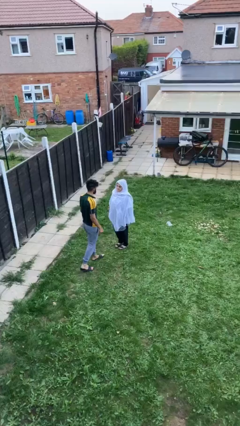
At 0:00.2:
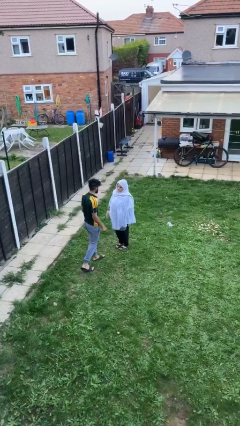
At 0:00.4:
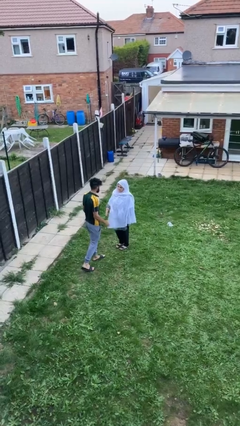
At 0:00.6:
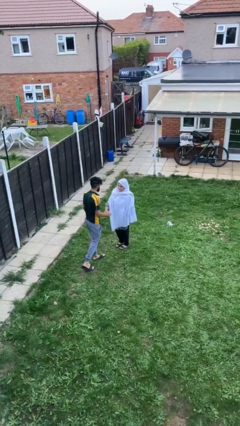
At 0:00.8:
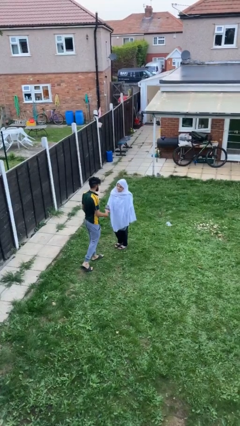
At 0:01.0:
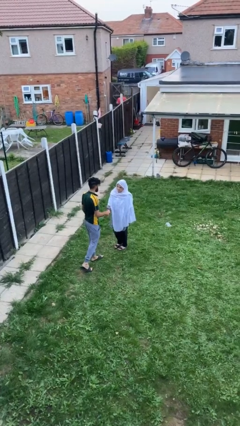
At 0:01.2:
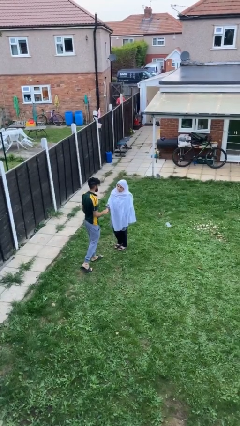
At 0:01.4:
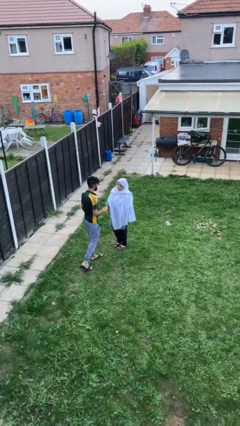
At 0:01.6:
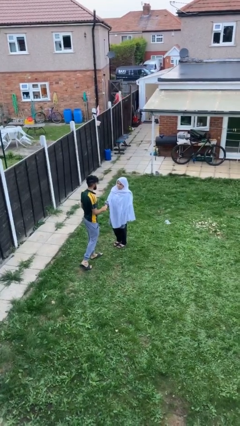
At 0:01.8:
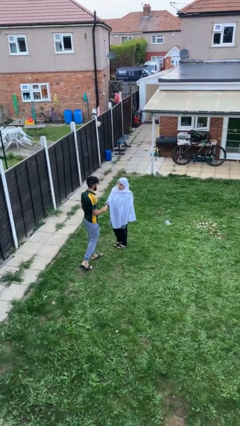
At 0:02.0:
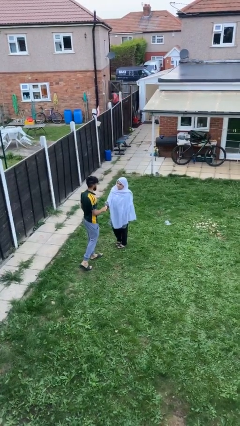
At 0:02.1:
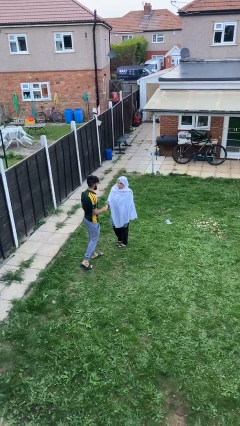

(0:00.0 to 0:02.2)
person shakes hand

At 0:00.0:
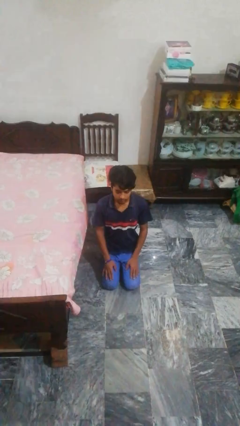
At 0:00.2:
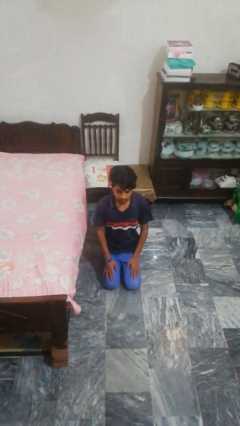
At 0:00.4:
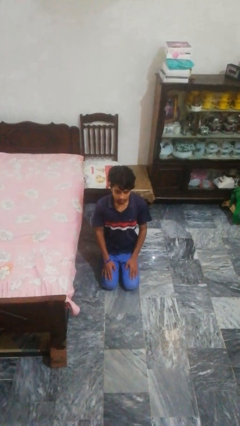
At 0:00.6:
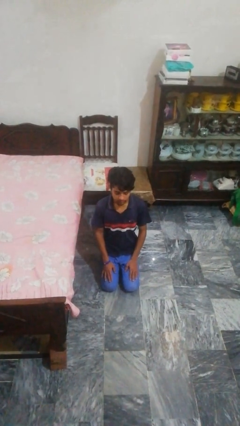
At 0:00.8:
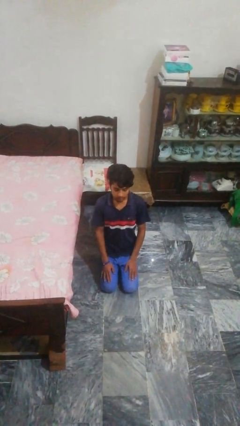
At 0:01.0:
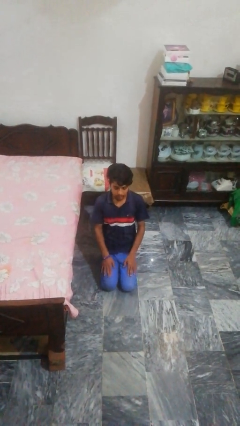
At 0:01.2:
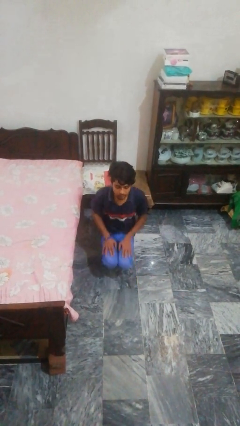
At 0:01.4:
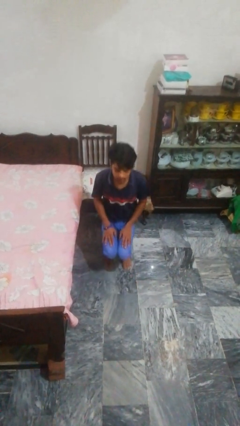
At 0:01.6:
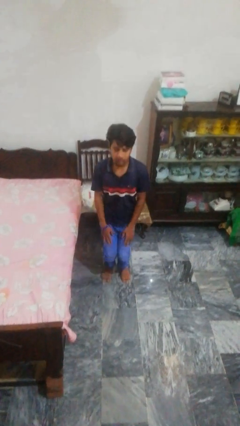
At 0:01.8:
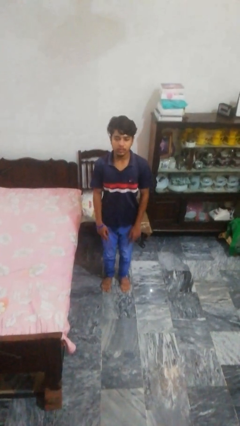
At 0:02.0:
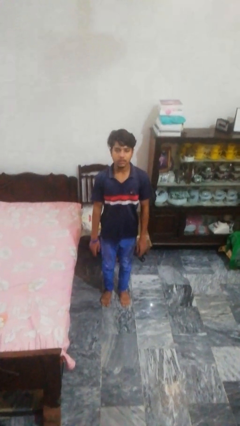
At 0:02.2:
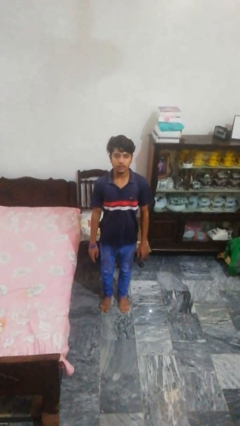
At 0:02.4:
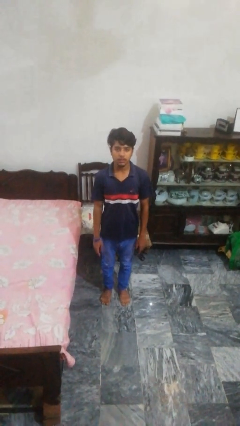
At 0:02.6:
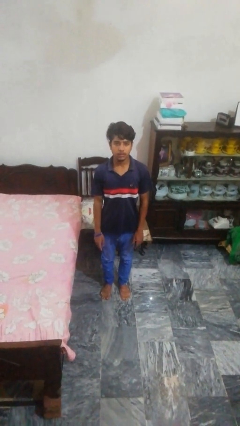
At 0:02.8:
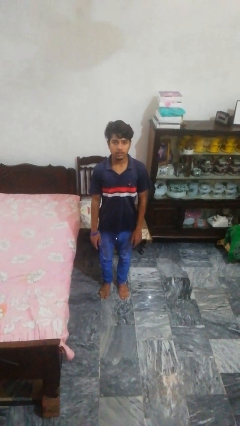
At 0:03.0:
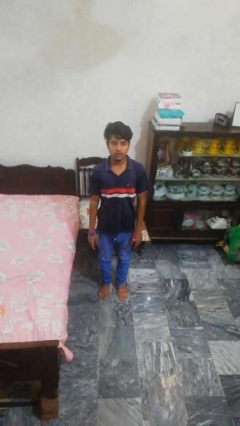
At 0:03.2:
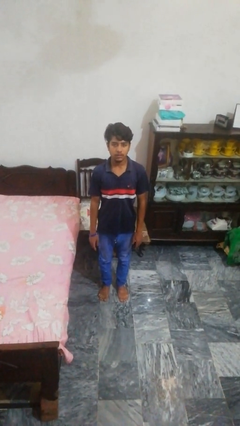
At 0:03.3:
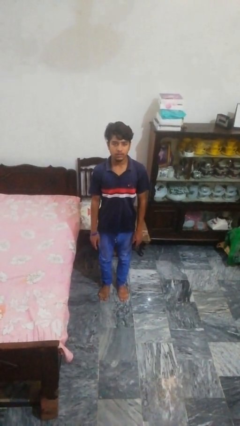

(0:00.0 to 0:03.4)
person stands up from floor

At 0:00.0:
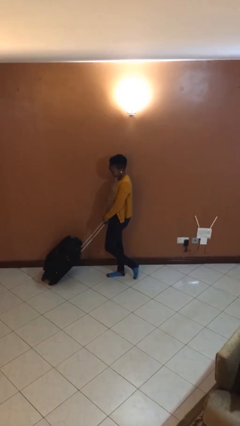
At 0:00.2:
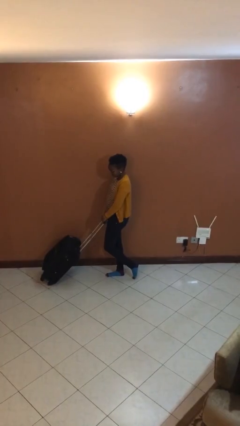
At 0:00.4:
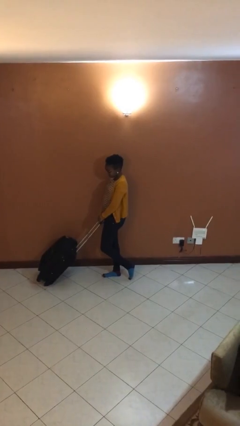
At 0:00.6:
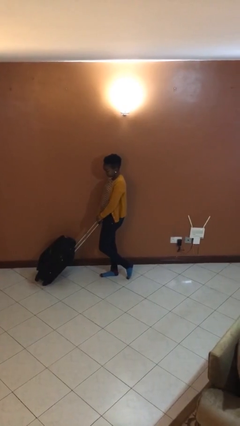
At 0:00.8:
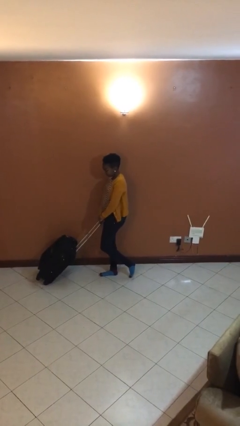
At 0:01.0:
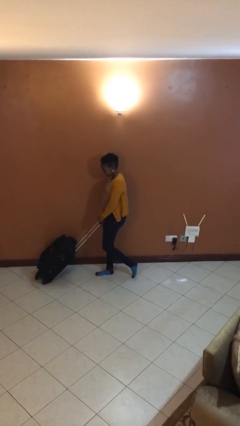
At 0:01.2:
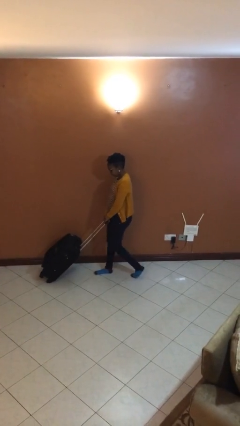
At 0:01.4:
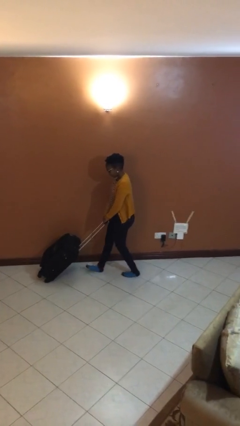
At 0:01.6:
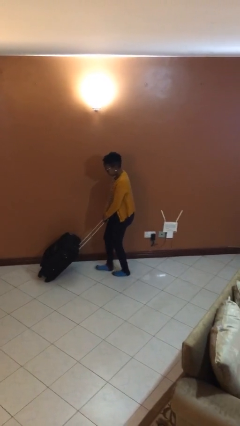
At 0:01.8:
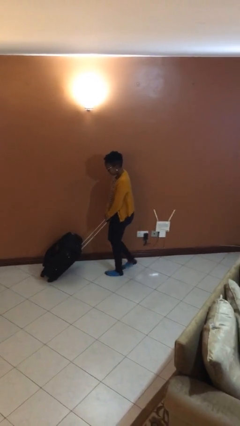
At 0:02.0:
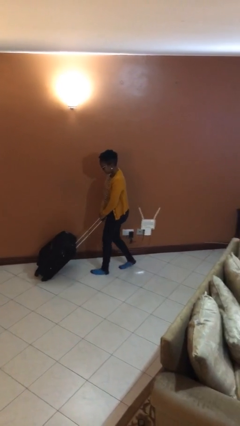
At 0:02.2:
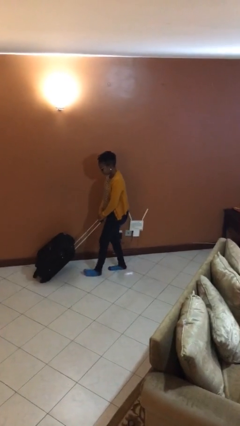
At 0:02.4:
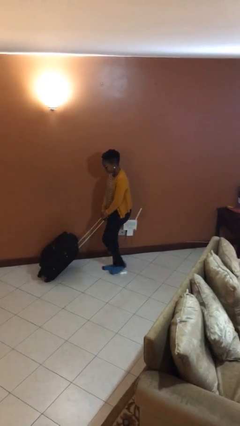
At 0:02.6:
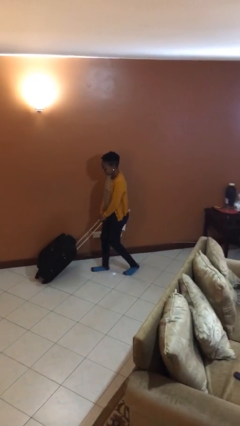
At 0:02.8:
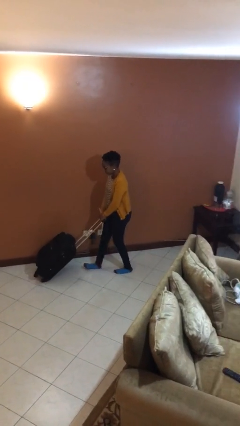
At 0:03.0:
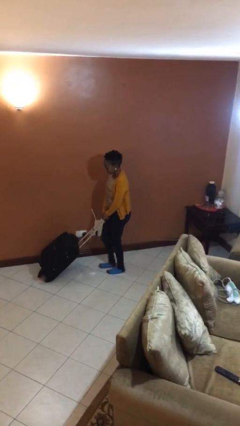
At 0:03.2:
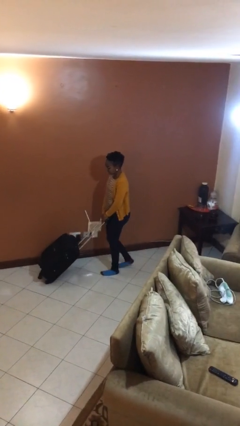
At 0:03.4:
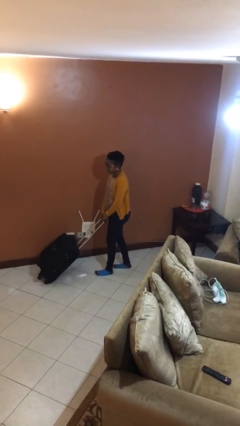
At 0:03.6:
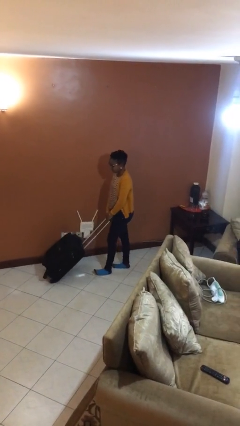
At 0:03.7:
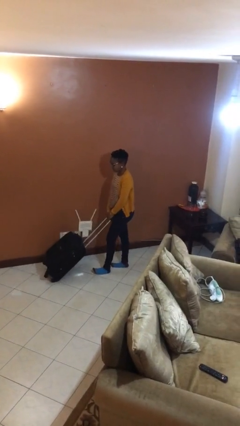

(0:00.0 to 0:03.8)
person pulls wheeled cart

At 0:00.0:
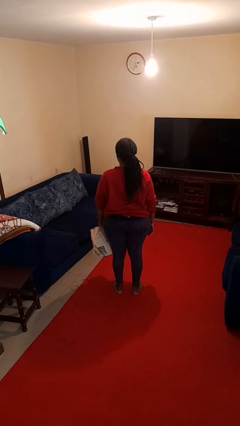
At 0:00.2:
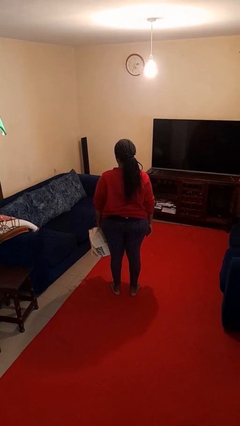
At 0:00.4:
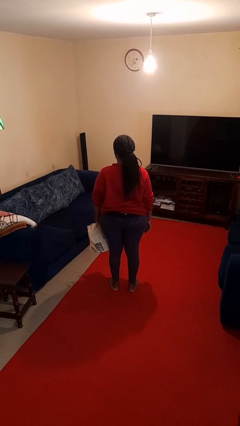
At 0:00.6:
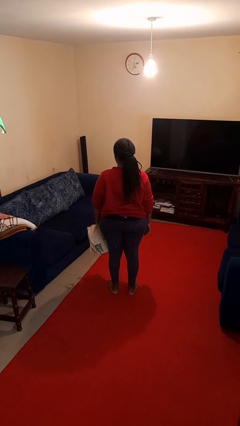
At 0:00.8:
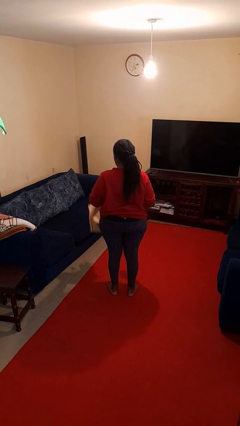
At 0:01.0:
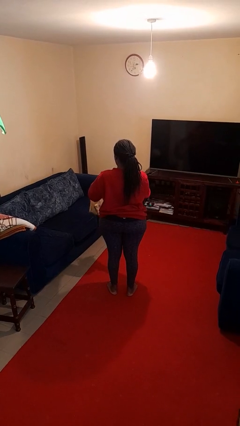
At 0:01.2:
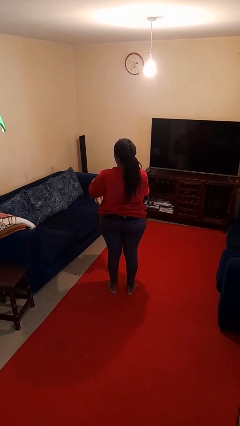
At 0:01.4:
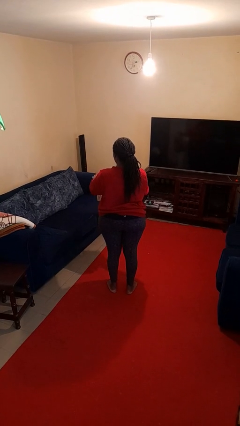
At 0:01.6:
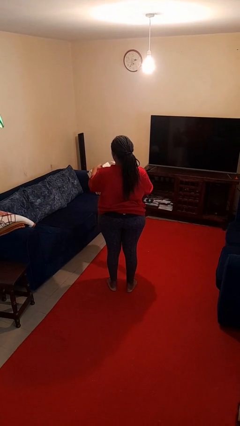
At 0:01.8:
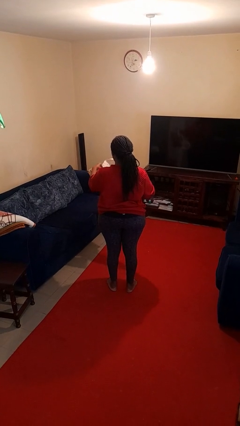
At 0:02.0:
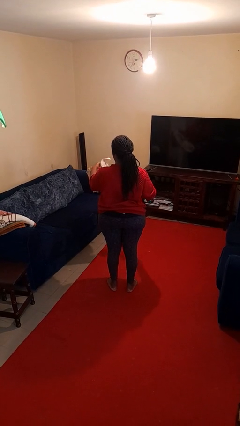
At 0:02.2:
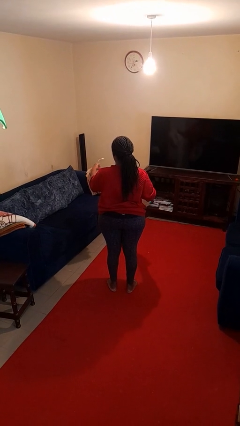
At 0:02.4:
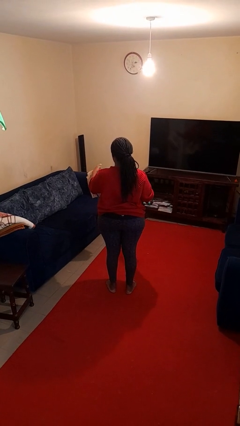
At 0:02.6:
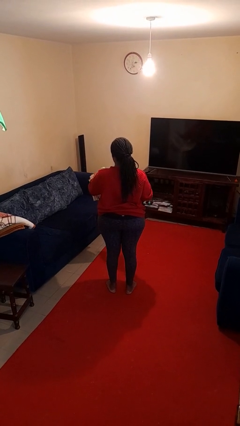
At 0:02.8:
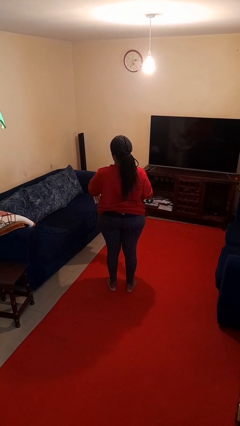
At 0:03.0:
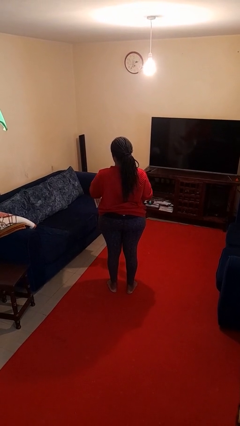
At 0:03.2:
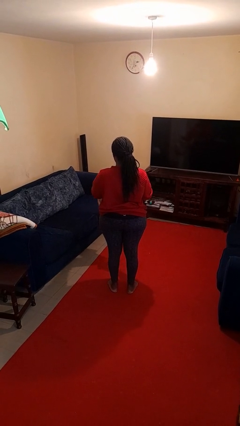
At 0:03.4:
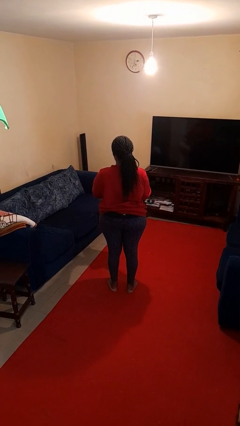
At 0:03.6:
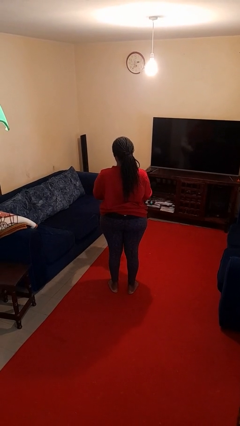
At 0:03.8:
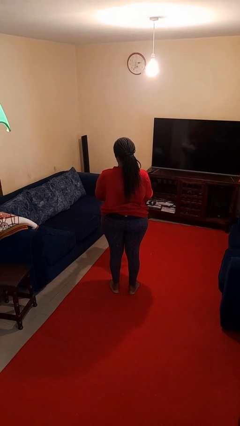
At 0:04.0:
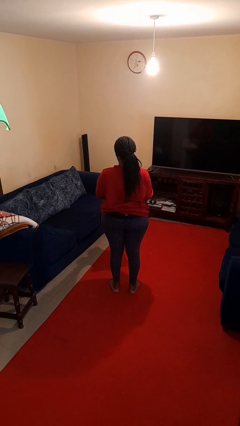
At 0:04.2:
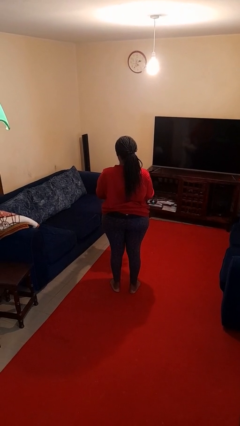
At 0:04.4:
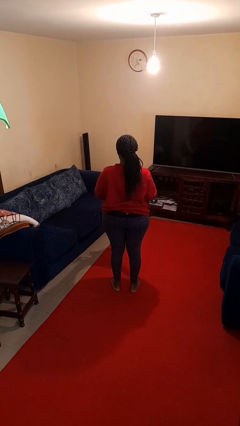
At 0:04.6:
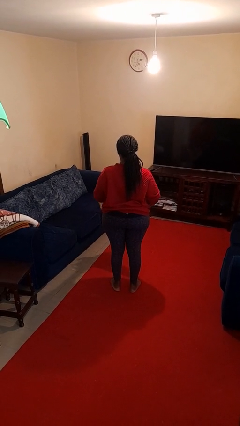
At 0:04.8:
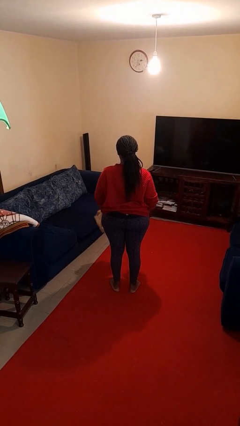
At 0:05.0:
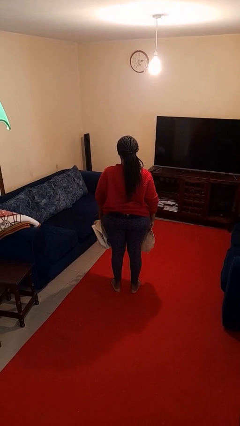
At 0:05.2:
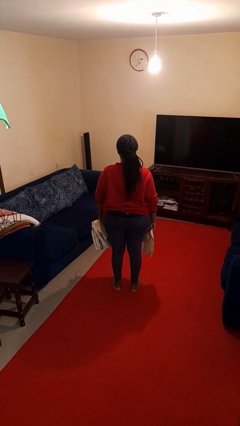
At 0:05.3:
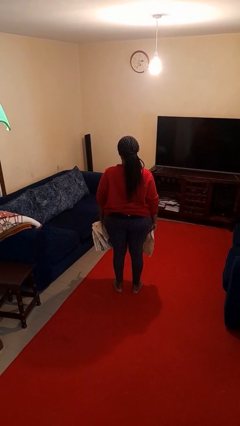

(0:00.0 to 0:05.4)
person tears paper

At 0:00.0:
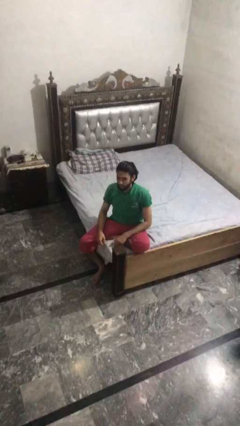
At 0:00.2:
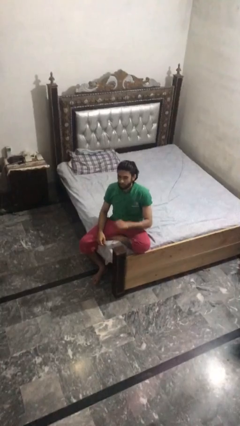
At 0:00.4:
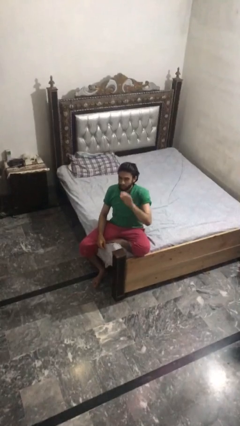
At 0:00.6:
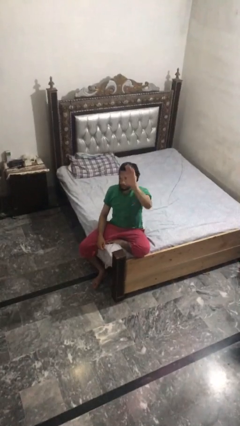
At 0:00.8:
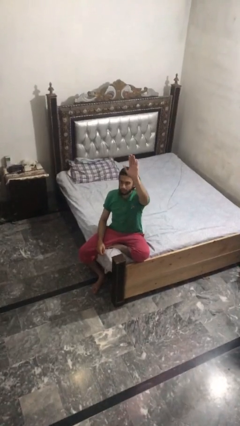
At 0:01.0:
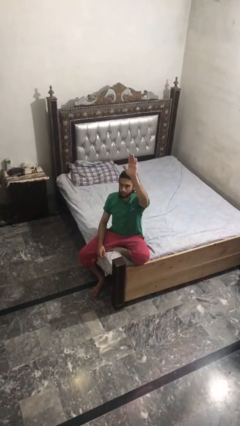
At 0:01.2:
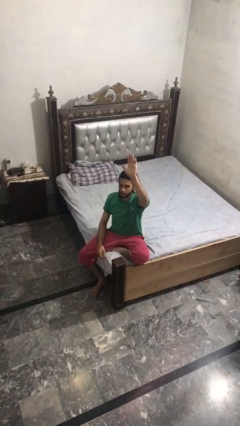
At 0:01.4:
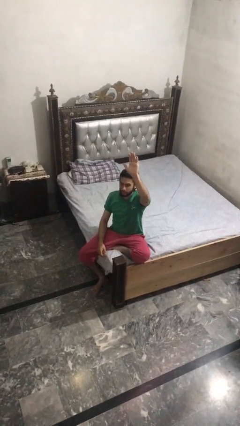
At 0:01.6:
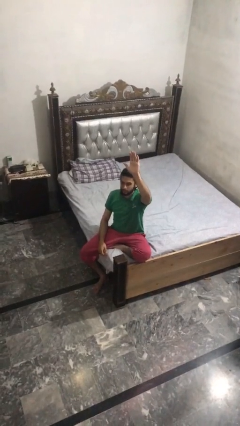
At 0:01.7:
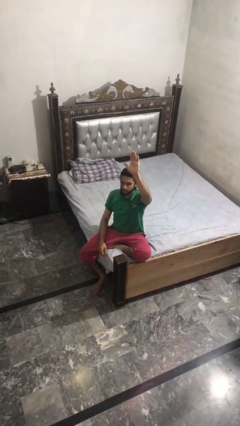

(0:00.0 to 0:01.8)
person gestures raise hand

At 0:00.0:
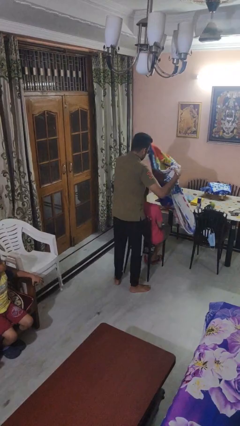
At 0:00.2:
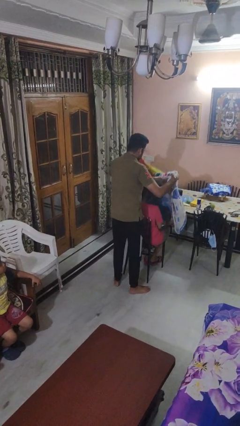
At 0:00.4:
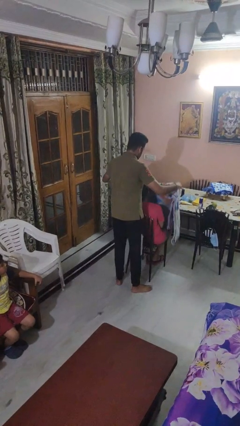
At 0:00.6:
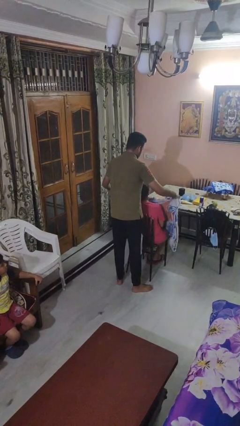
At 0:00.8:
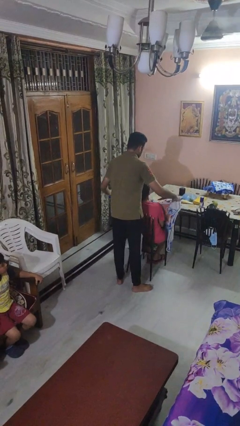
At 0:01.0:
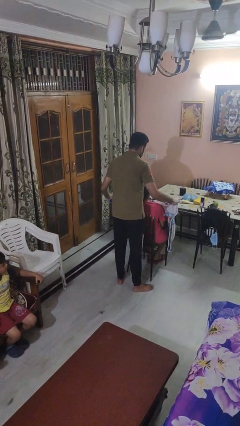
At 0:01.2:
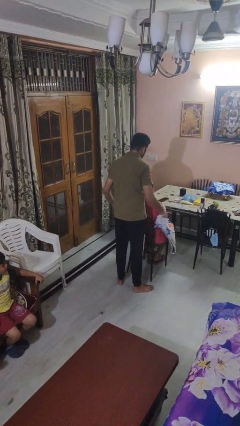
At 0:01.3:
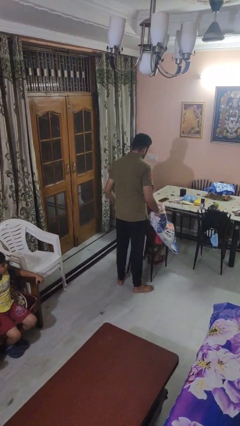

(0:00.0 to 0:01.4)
person covers friend with blanket
